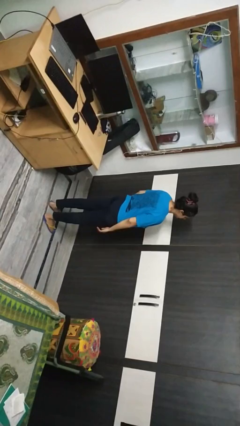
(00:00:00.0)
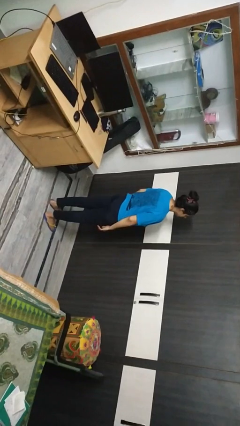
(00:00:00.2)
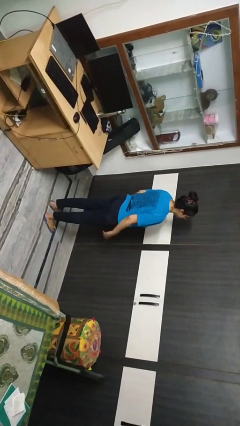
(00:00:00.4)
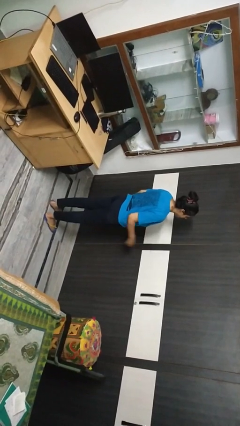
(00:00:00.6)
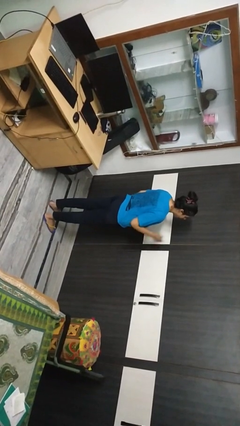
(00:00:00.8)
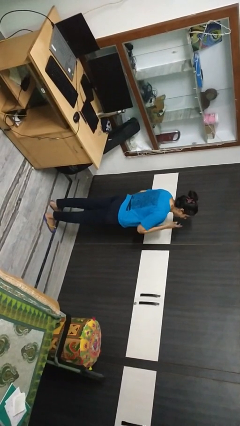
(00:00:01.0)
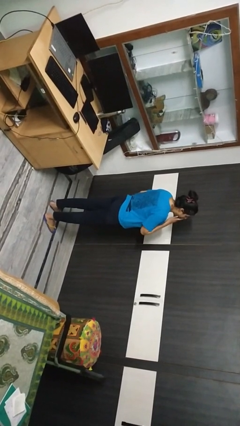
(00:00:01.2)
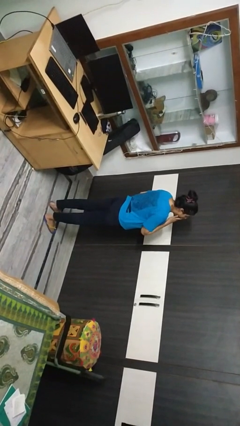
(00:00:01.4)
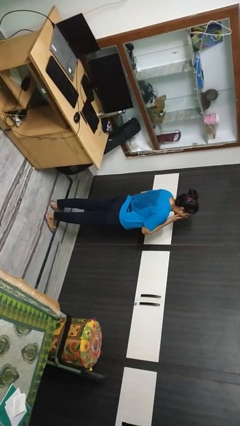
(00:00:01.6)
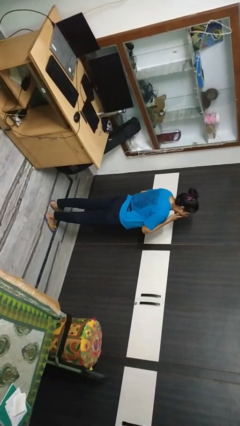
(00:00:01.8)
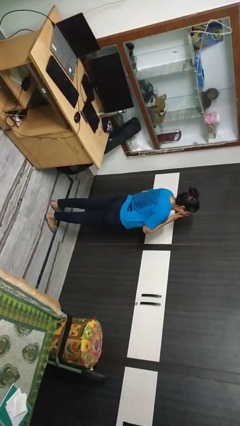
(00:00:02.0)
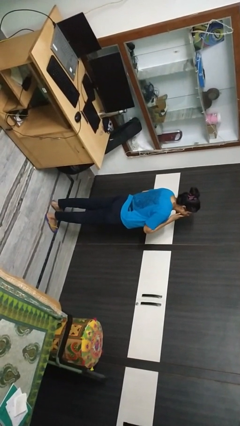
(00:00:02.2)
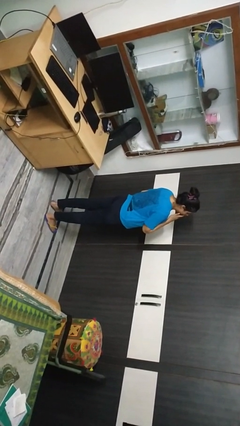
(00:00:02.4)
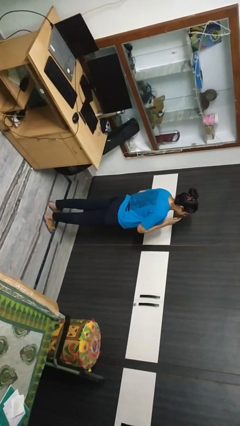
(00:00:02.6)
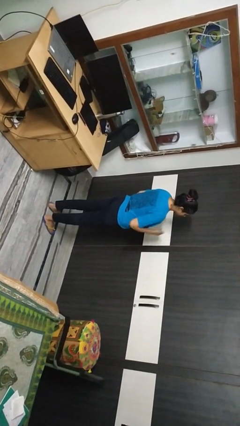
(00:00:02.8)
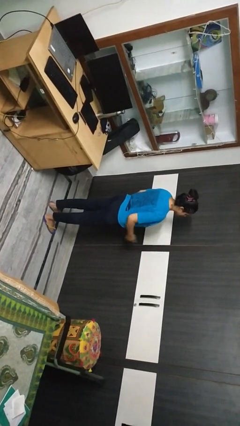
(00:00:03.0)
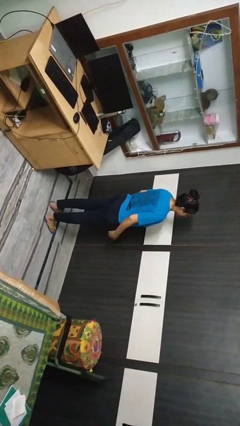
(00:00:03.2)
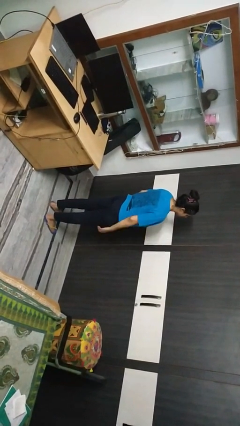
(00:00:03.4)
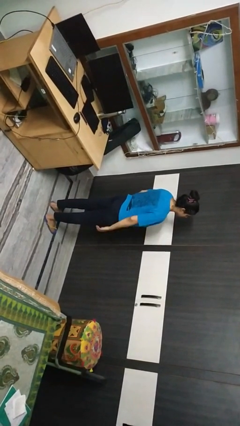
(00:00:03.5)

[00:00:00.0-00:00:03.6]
person yawns

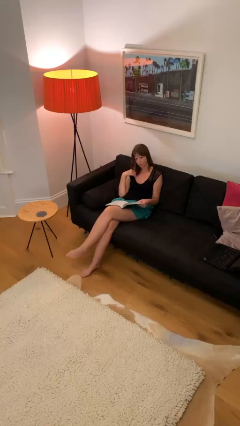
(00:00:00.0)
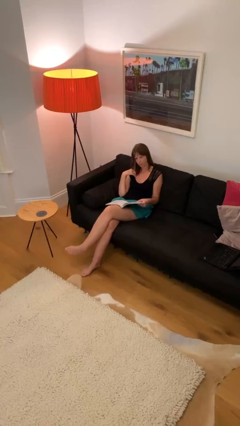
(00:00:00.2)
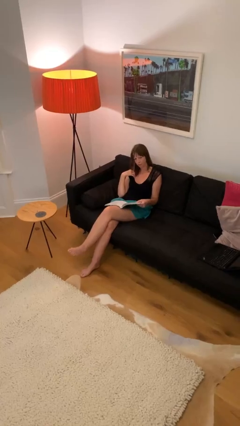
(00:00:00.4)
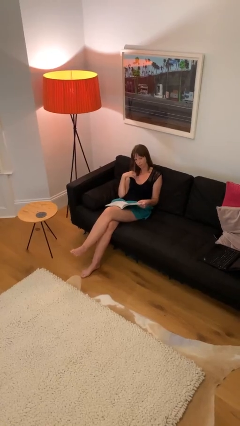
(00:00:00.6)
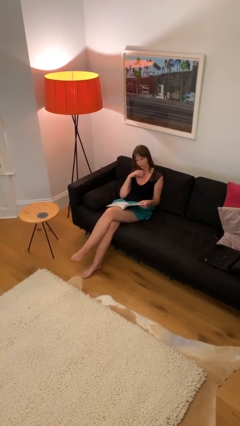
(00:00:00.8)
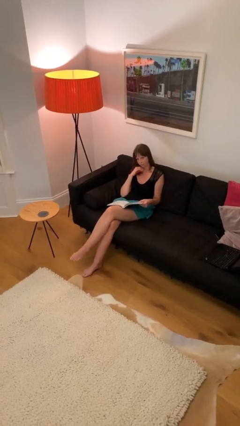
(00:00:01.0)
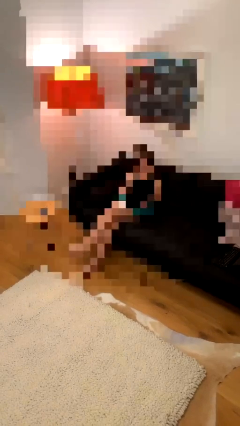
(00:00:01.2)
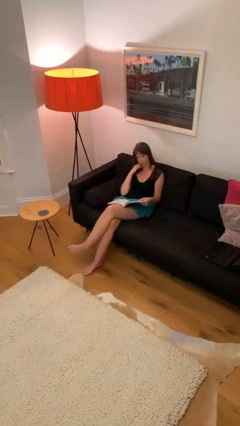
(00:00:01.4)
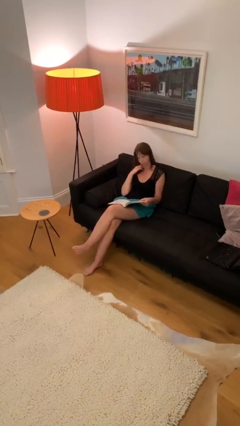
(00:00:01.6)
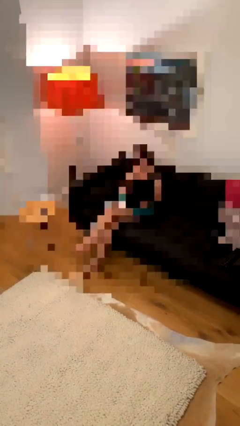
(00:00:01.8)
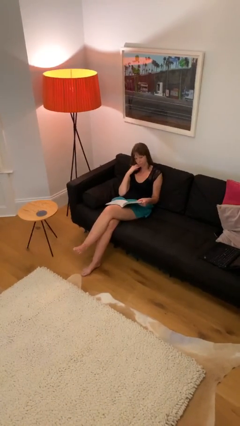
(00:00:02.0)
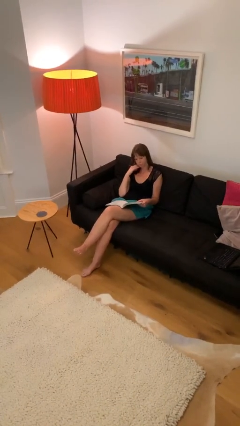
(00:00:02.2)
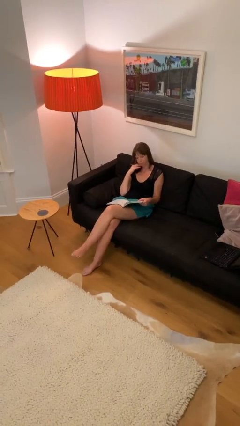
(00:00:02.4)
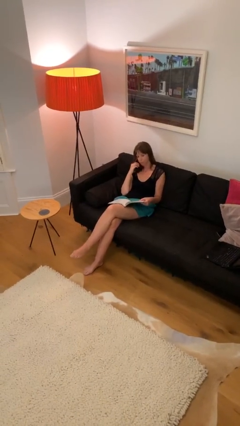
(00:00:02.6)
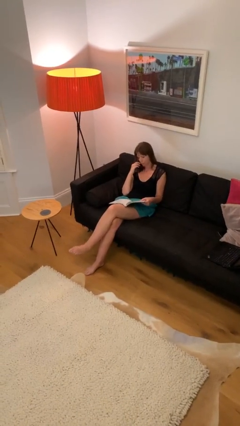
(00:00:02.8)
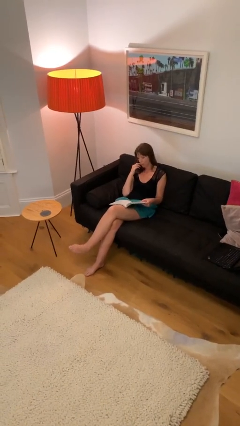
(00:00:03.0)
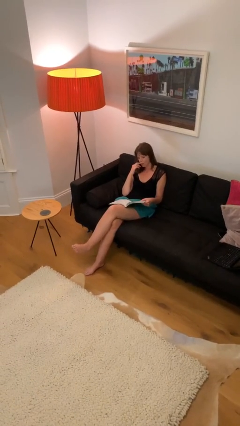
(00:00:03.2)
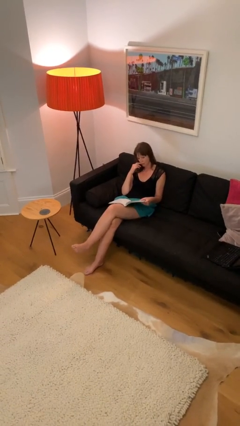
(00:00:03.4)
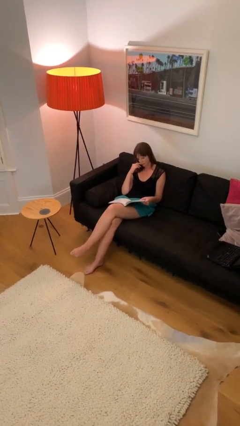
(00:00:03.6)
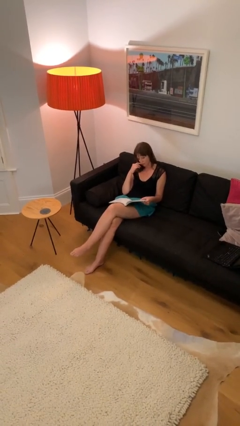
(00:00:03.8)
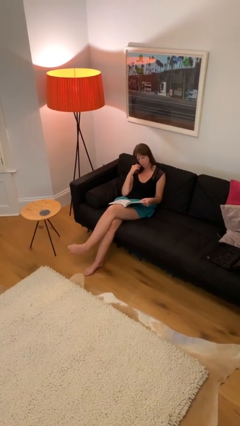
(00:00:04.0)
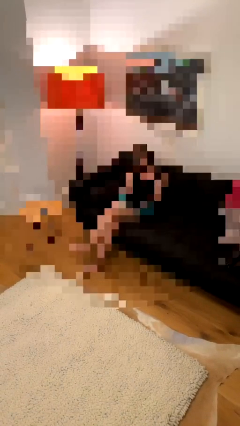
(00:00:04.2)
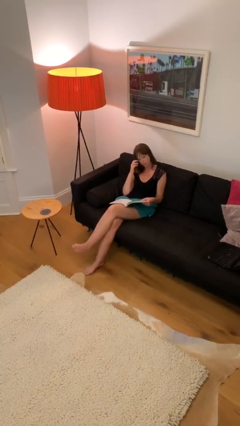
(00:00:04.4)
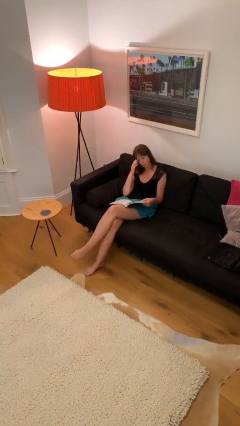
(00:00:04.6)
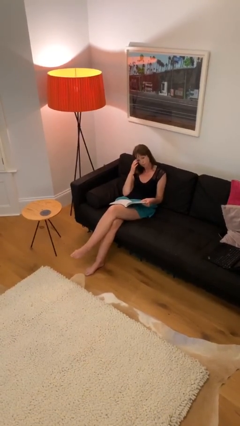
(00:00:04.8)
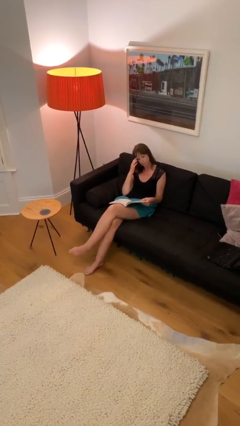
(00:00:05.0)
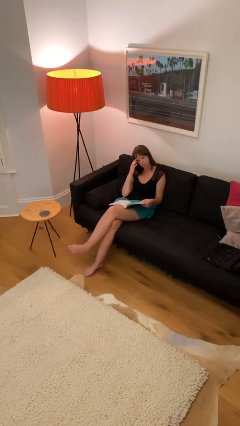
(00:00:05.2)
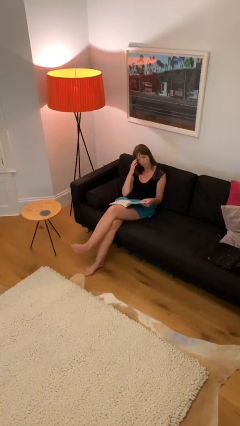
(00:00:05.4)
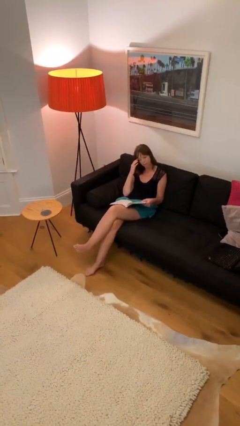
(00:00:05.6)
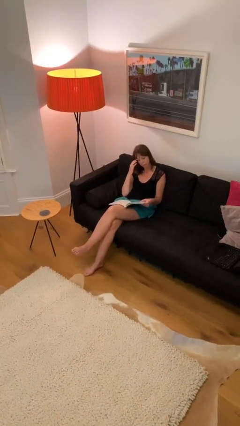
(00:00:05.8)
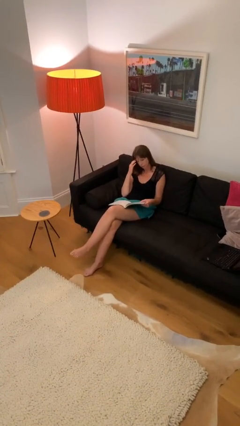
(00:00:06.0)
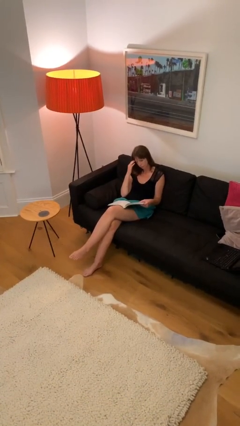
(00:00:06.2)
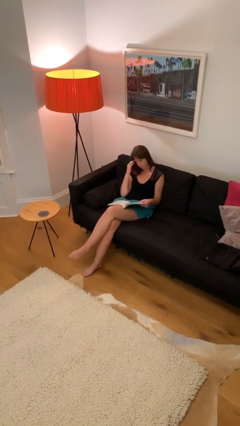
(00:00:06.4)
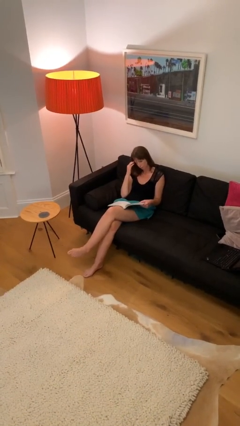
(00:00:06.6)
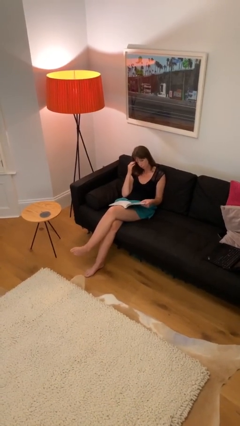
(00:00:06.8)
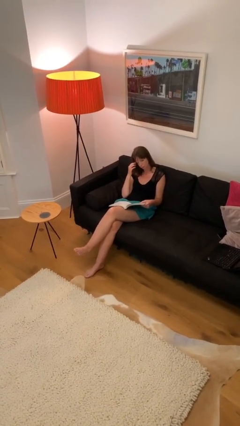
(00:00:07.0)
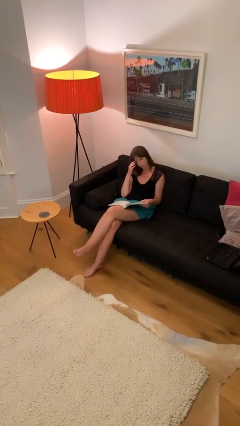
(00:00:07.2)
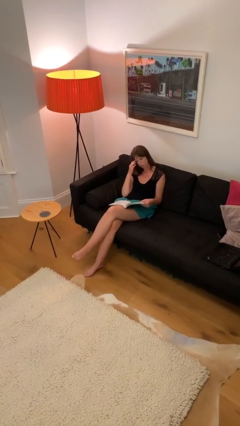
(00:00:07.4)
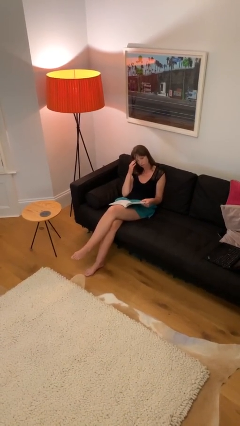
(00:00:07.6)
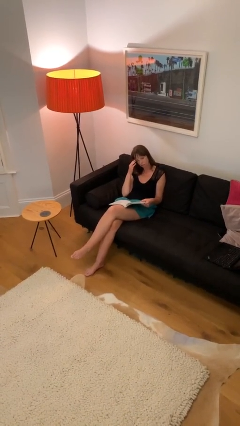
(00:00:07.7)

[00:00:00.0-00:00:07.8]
person reads document

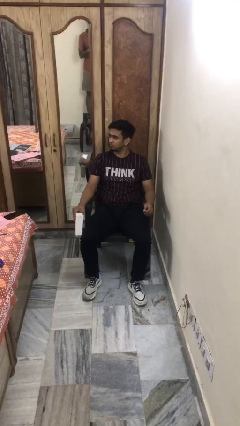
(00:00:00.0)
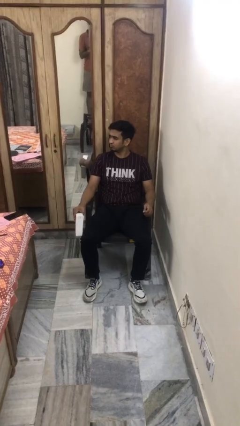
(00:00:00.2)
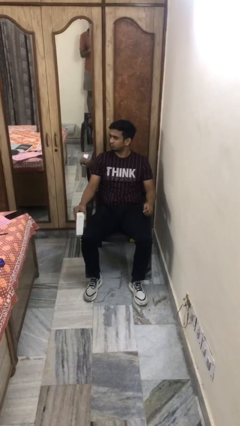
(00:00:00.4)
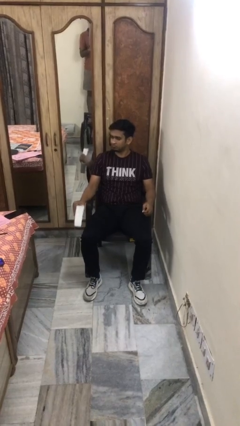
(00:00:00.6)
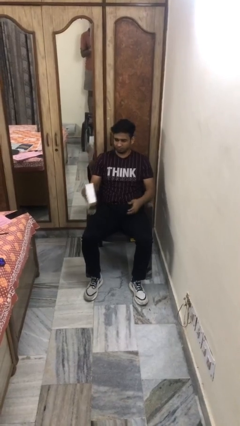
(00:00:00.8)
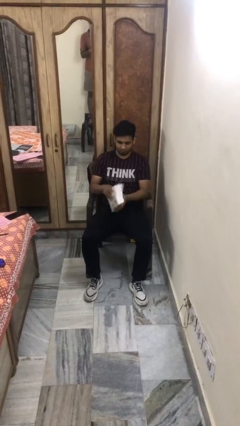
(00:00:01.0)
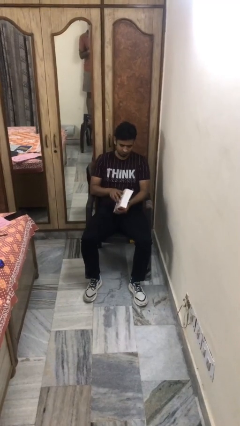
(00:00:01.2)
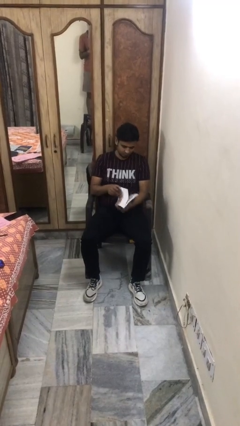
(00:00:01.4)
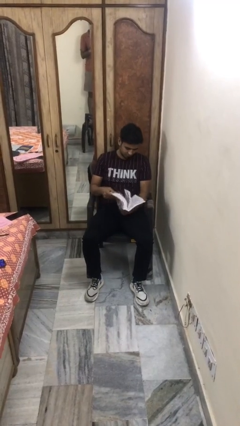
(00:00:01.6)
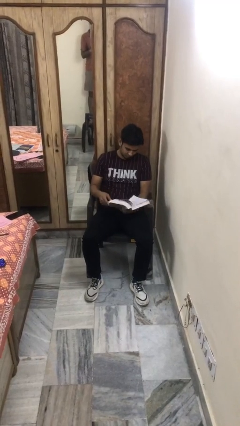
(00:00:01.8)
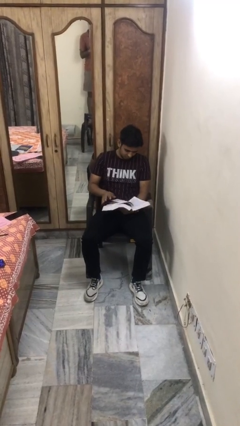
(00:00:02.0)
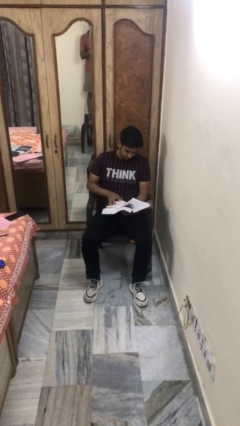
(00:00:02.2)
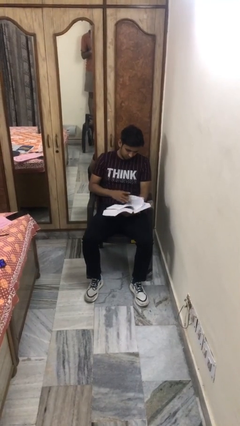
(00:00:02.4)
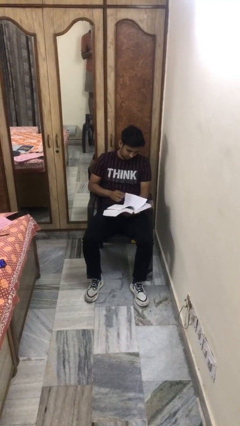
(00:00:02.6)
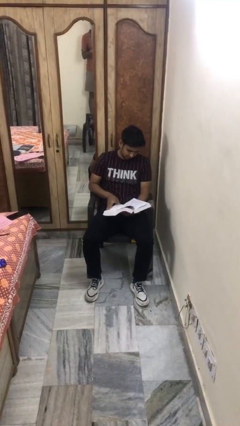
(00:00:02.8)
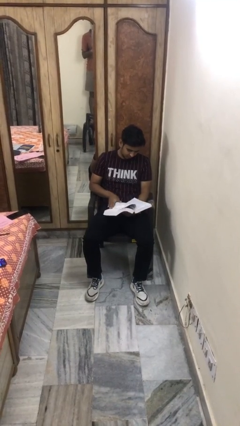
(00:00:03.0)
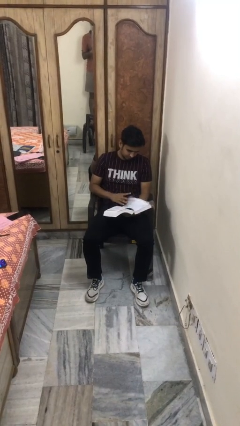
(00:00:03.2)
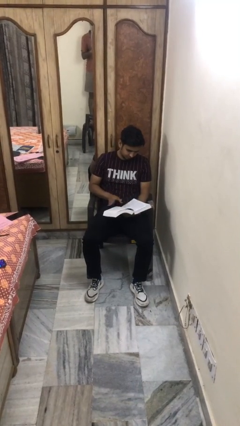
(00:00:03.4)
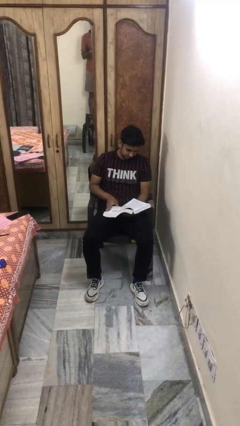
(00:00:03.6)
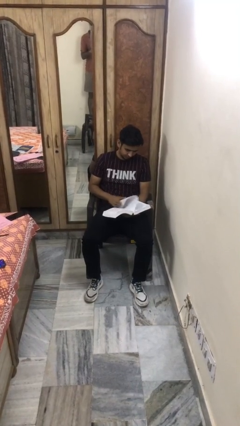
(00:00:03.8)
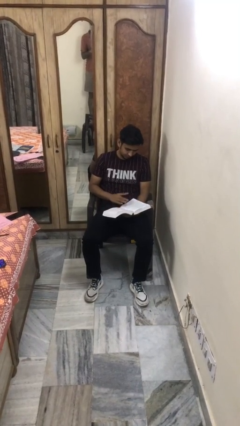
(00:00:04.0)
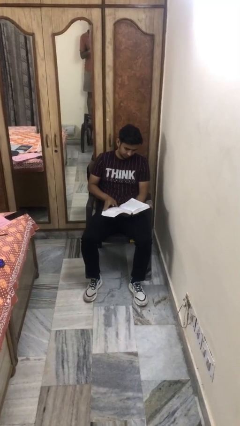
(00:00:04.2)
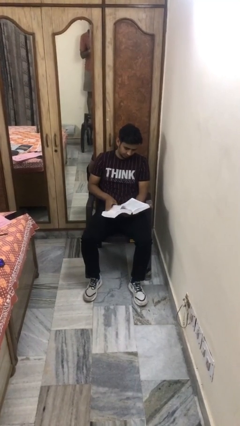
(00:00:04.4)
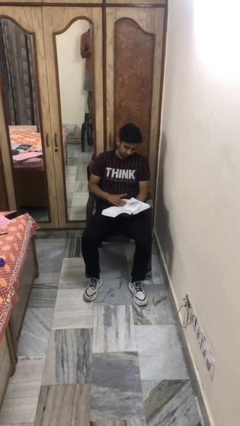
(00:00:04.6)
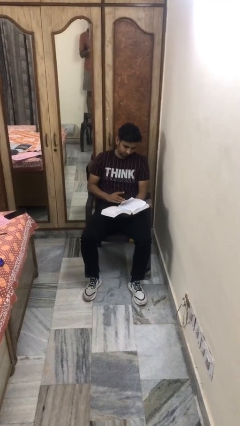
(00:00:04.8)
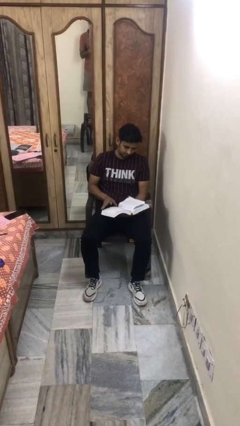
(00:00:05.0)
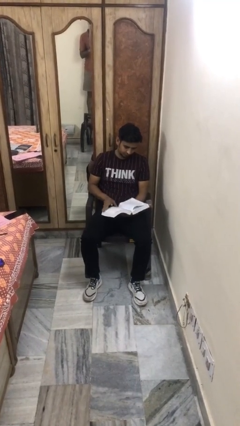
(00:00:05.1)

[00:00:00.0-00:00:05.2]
person reads book

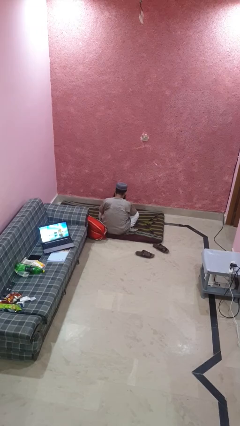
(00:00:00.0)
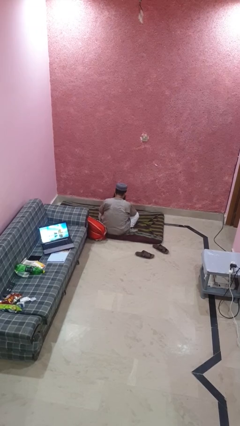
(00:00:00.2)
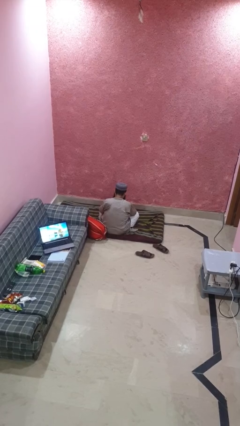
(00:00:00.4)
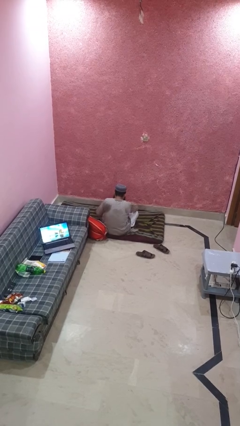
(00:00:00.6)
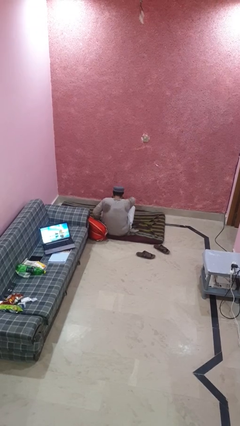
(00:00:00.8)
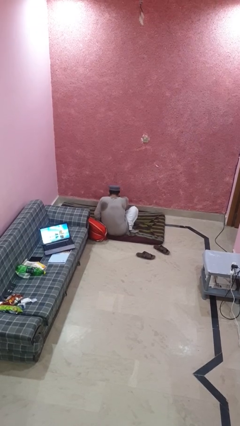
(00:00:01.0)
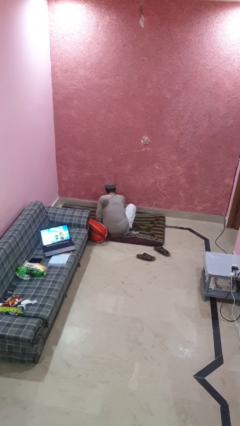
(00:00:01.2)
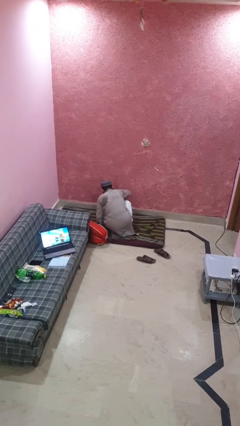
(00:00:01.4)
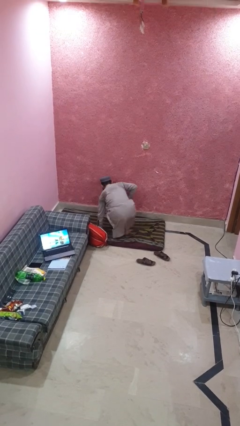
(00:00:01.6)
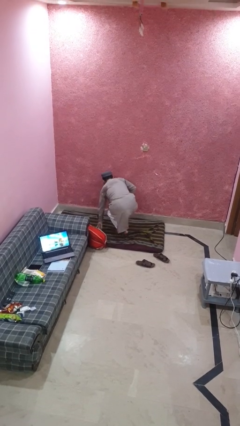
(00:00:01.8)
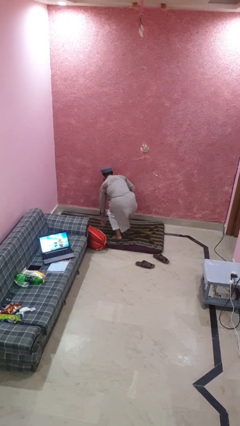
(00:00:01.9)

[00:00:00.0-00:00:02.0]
person stands up from floor
